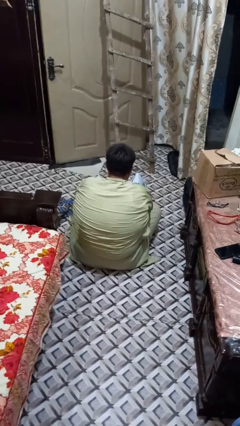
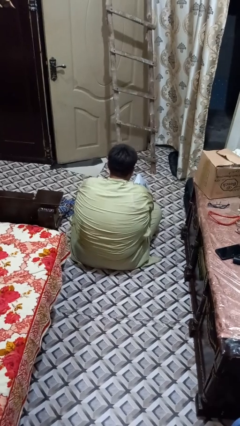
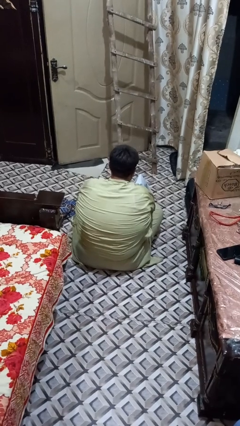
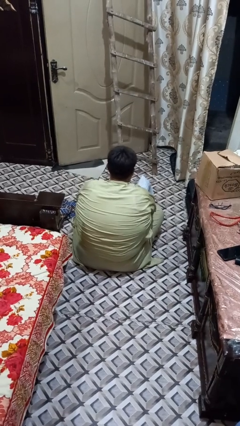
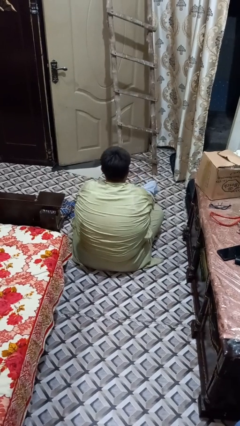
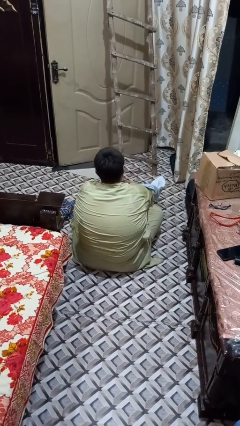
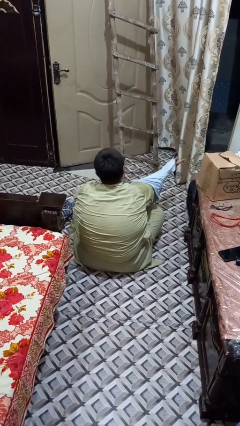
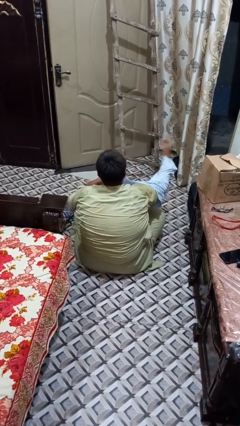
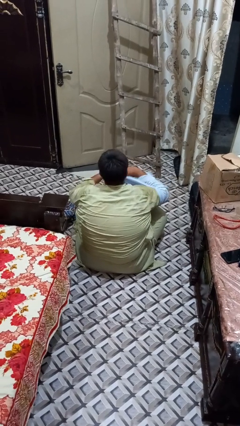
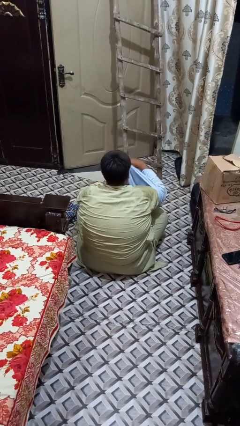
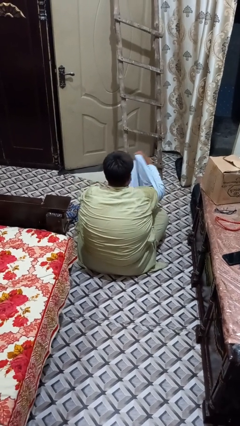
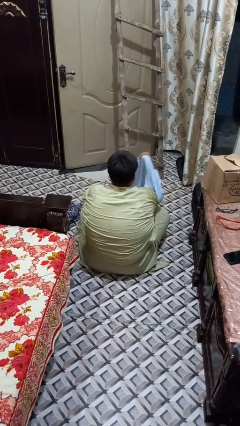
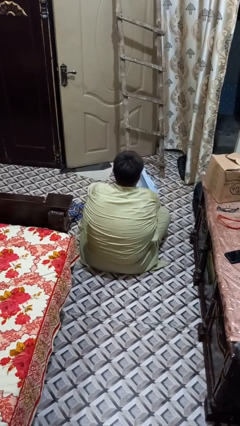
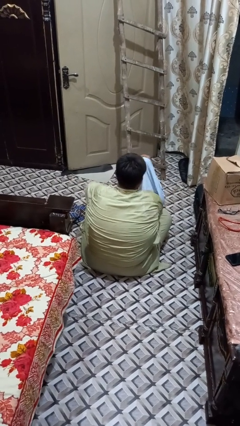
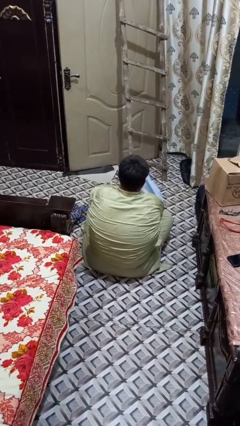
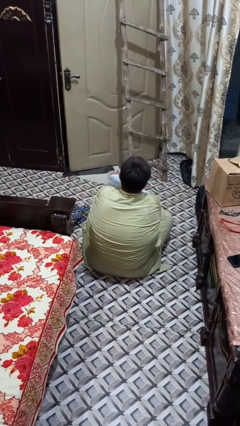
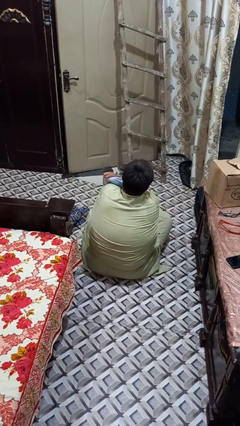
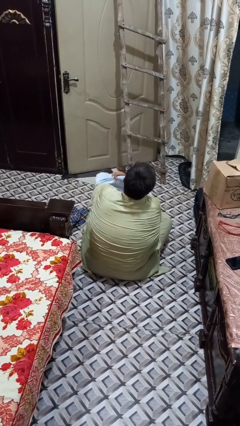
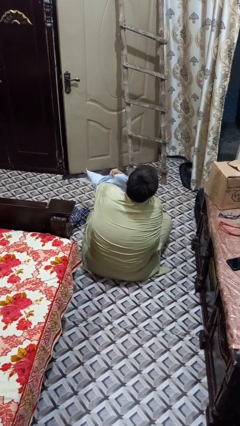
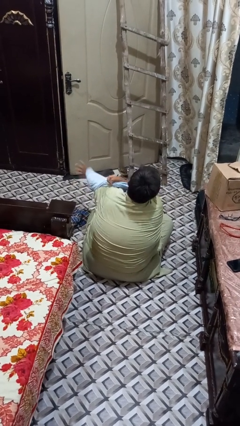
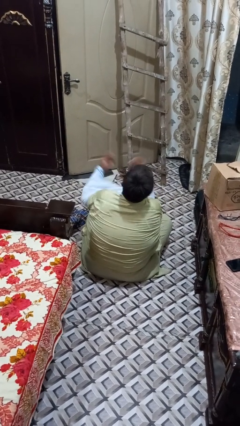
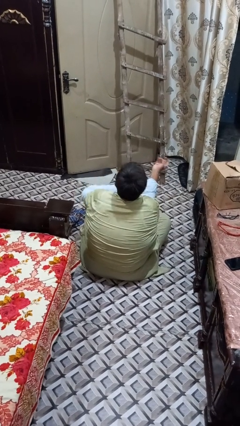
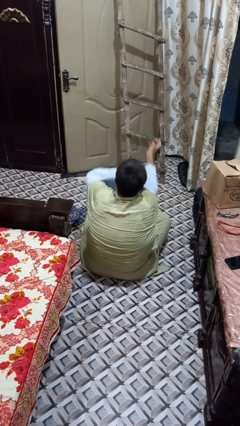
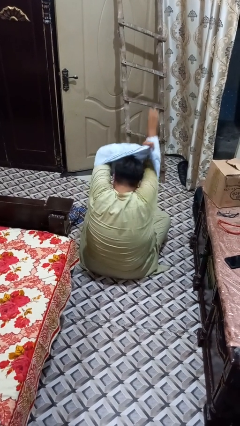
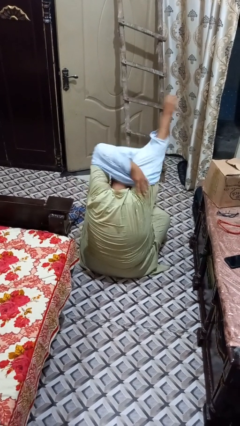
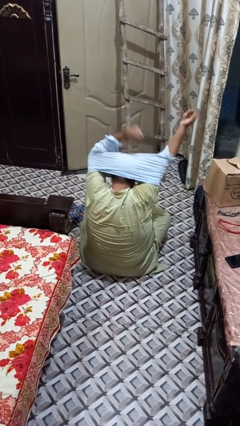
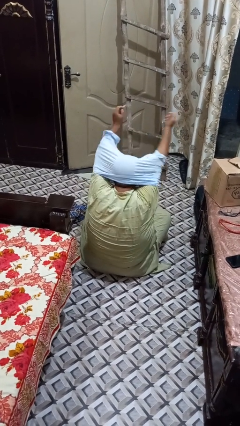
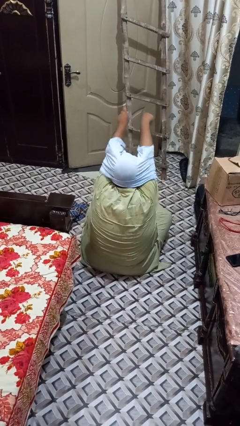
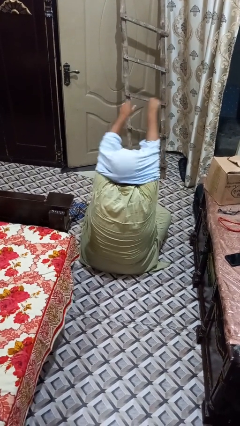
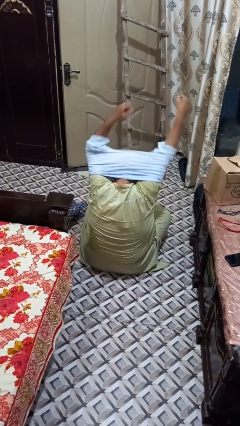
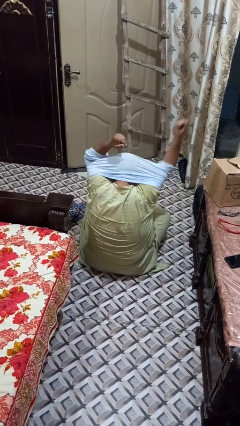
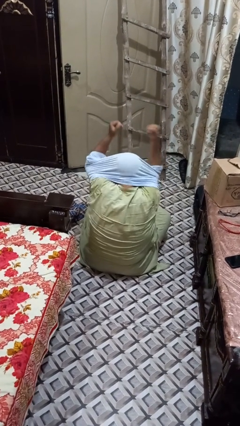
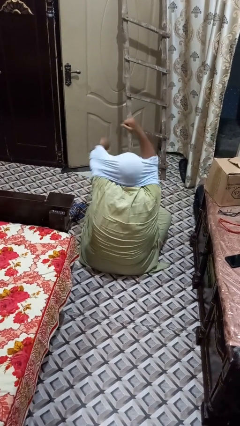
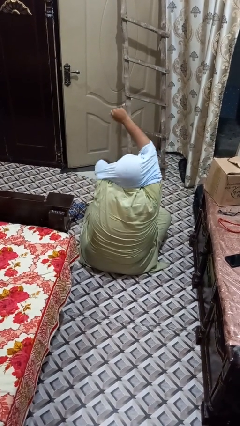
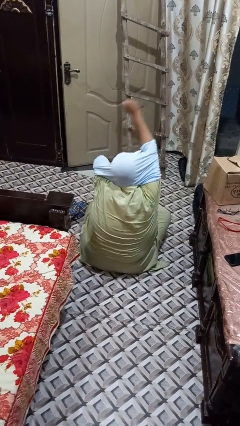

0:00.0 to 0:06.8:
person puts on shirt

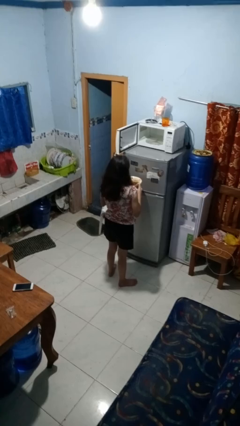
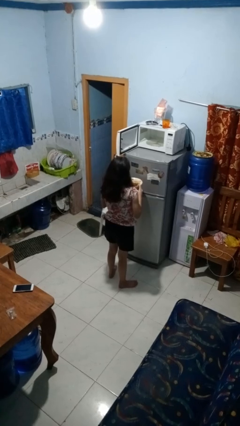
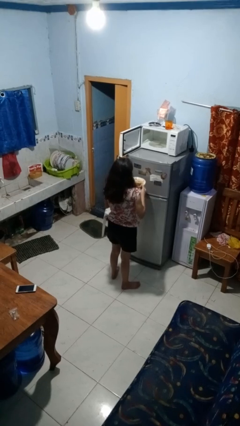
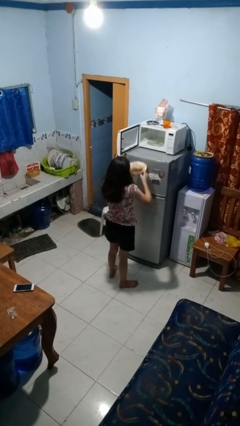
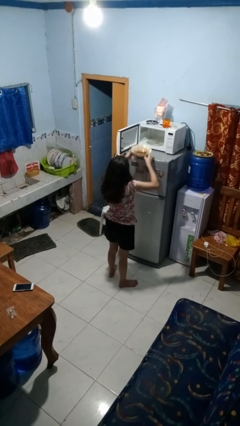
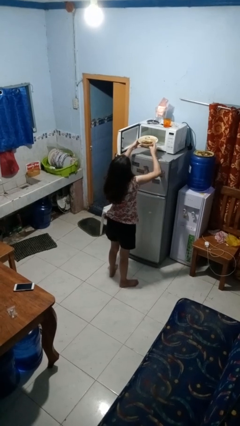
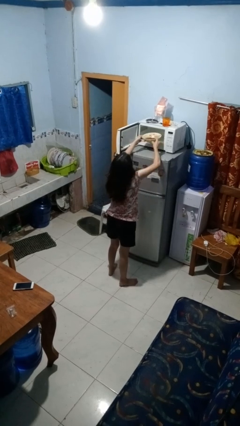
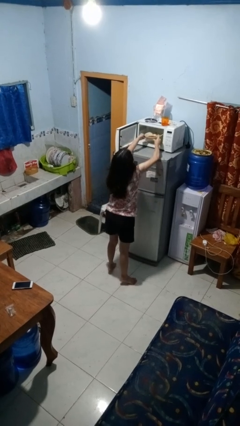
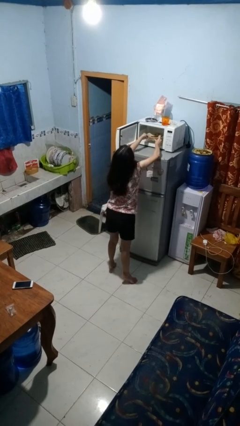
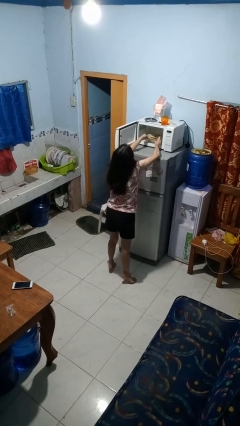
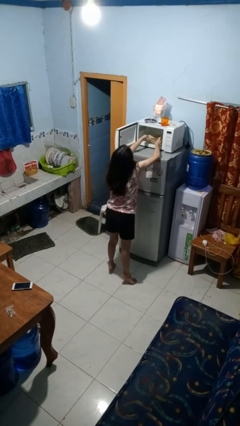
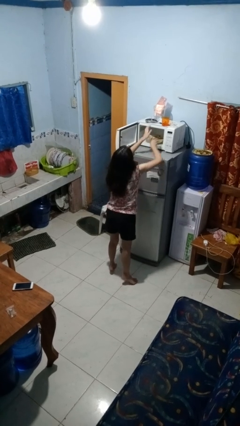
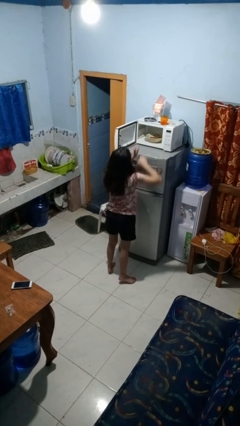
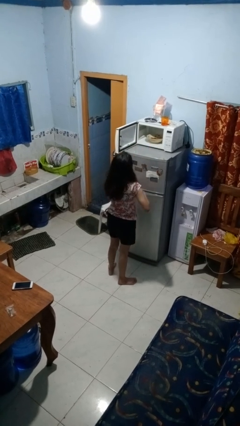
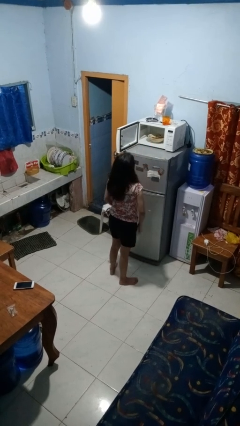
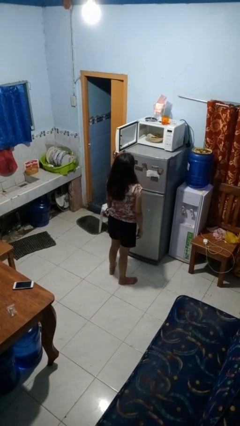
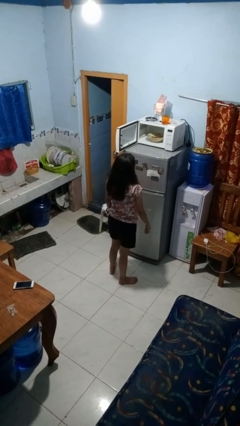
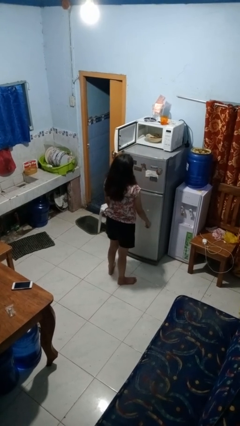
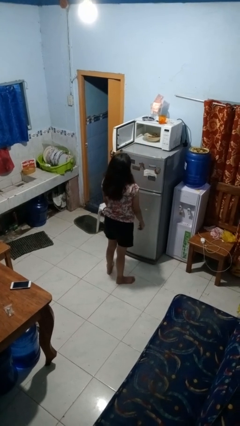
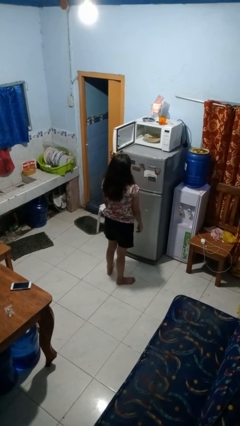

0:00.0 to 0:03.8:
person puts object into microwave

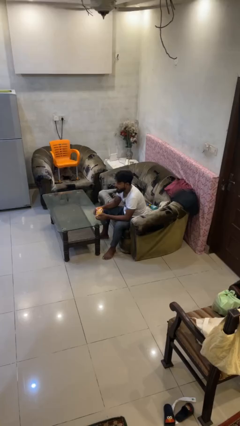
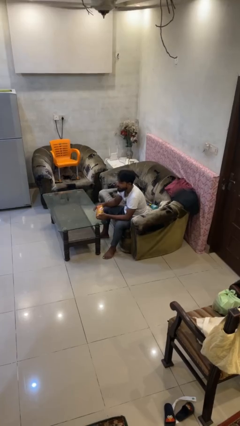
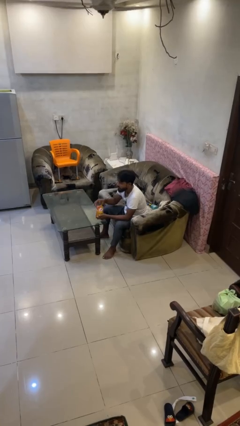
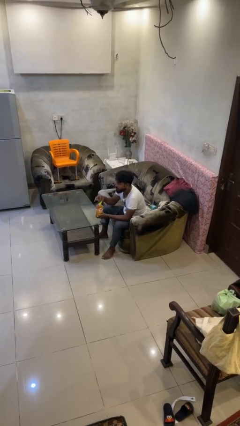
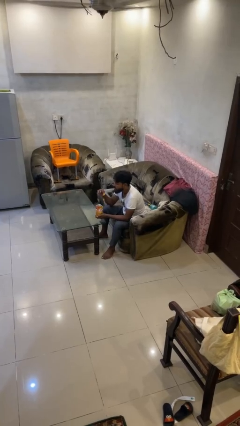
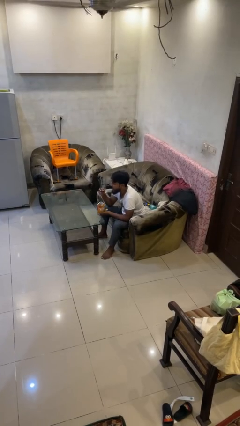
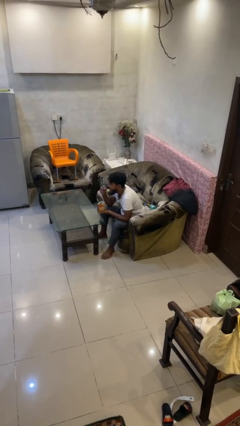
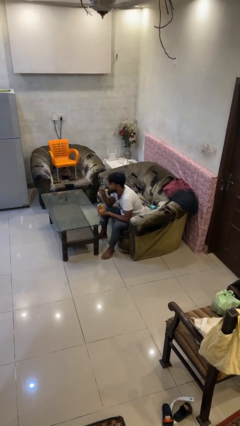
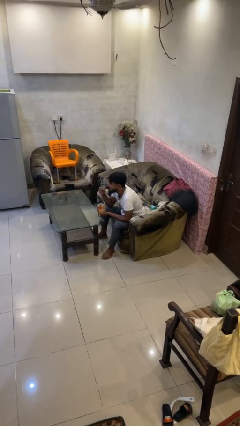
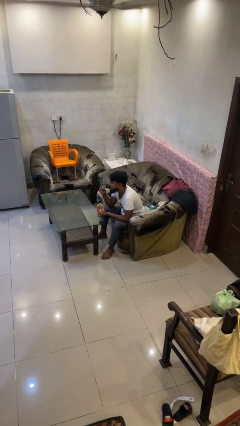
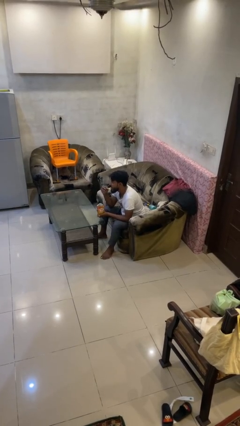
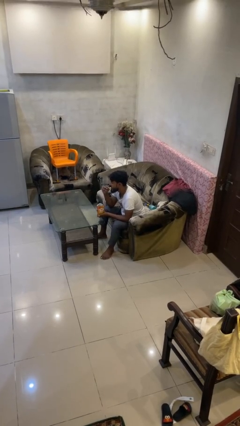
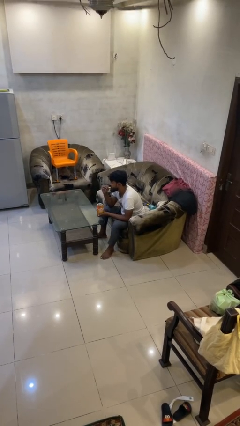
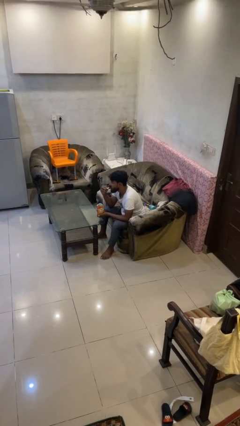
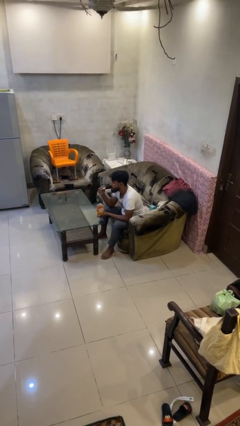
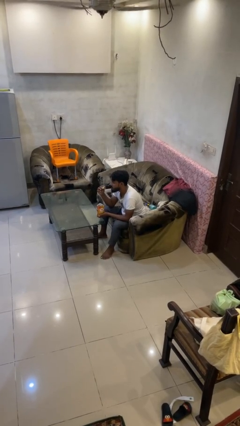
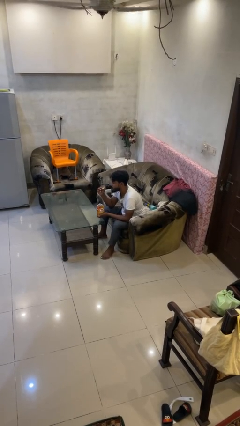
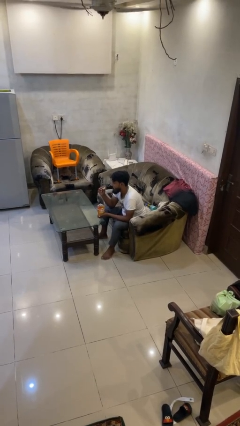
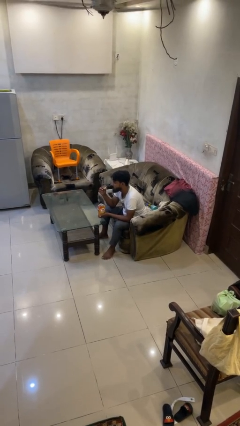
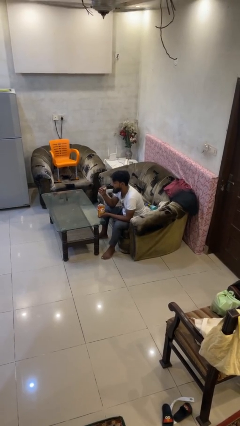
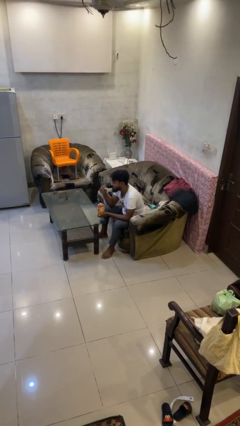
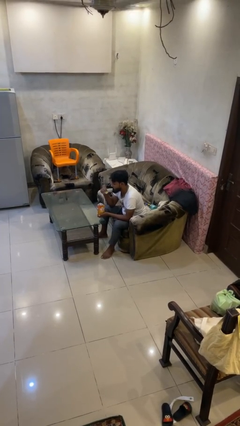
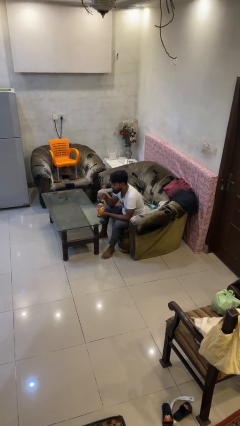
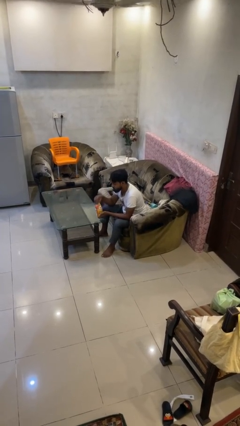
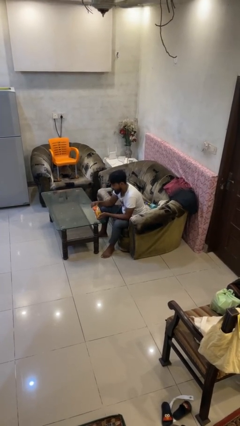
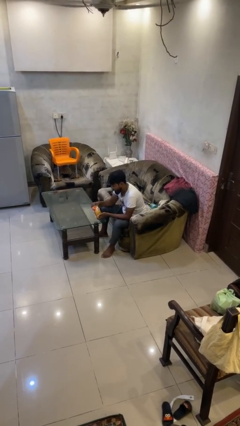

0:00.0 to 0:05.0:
person eats snack from bag

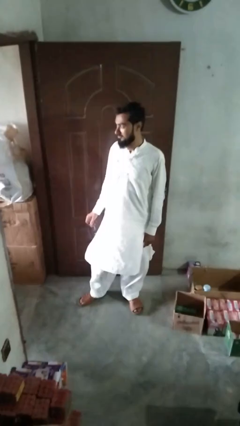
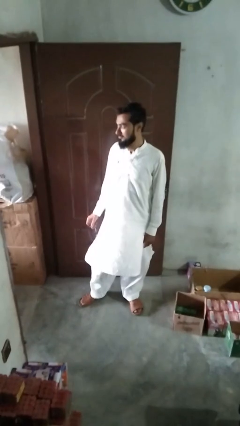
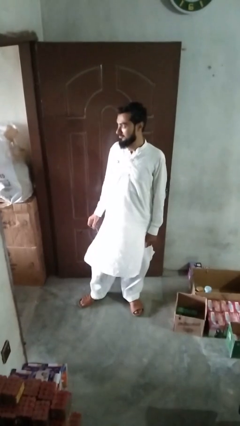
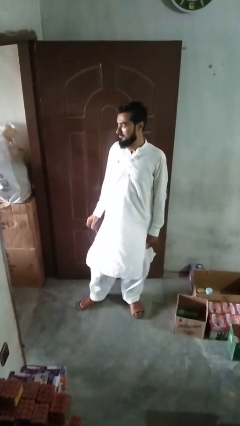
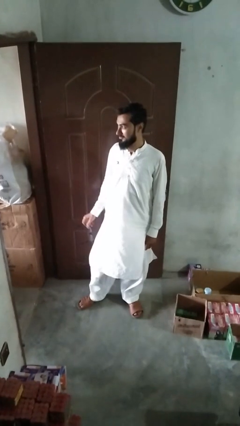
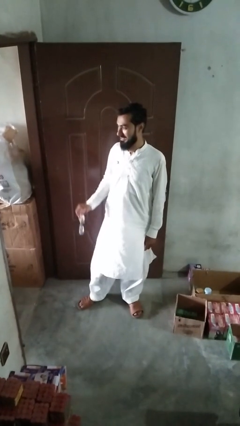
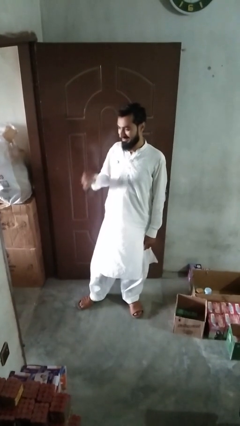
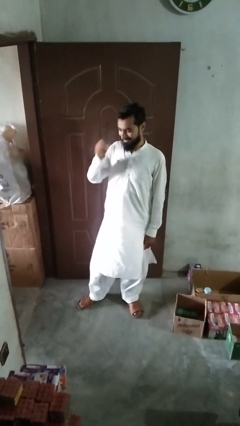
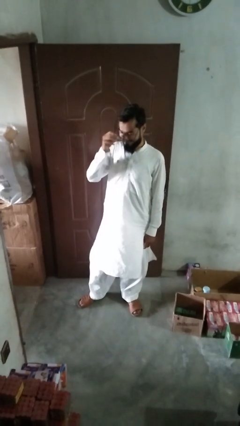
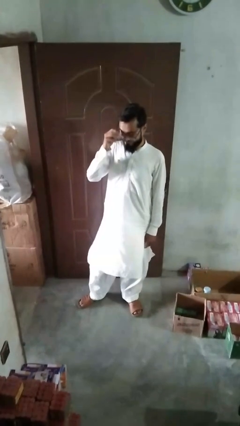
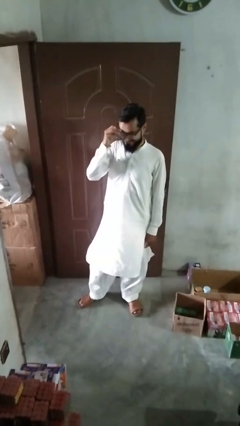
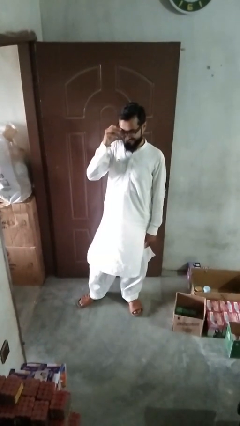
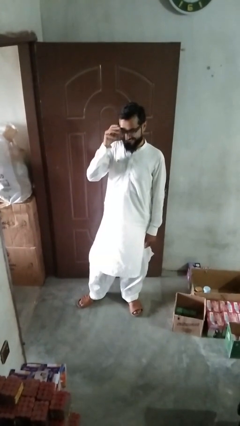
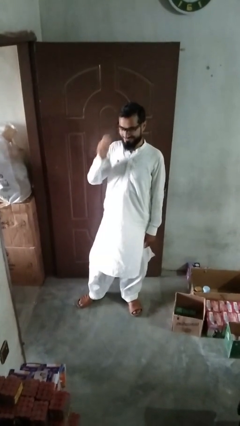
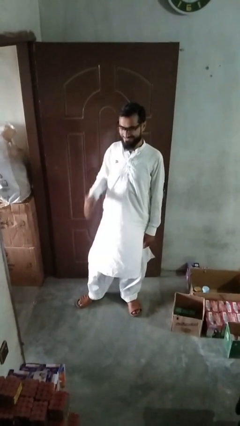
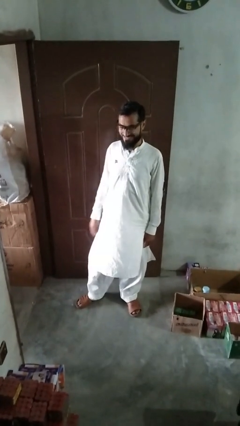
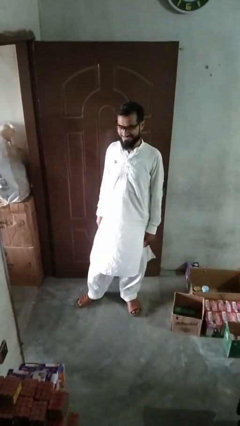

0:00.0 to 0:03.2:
person puts on glasses
